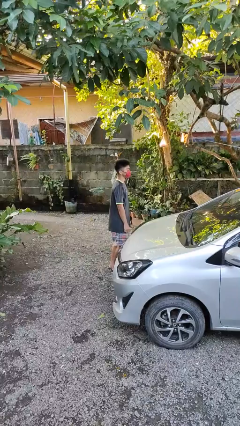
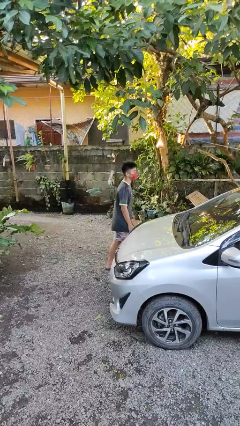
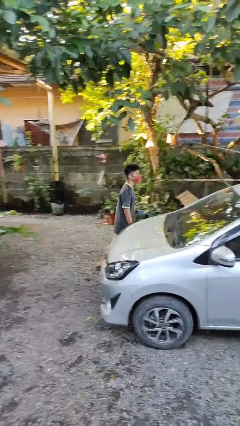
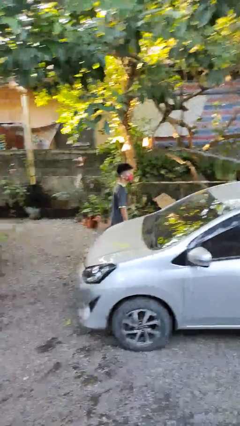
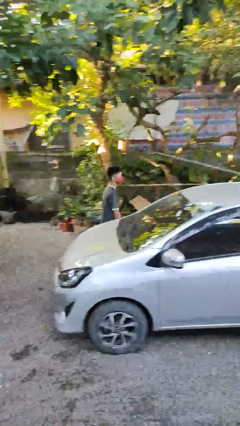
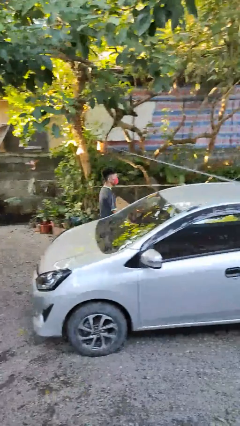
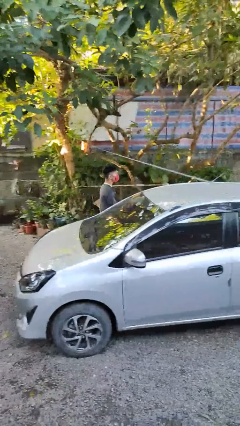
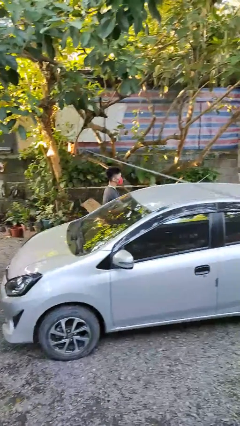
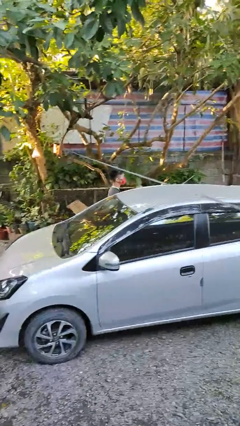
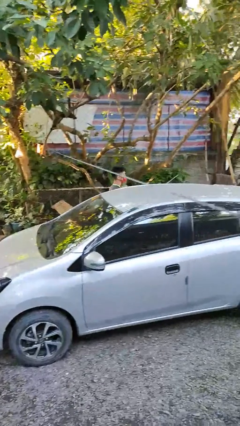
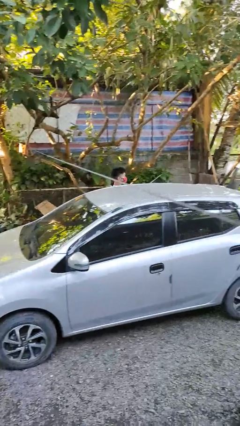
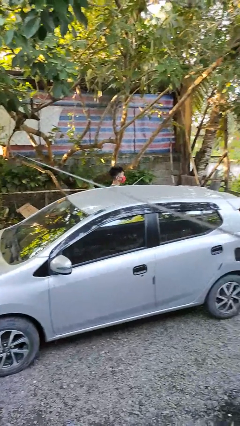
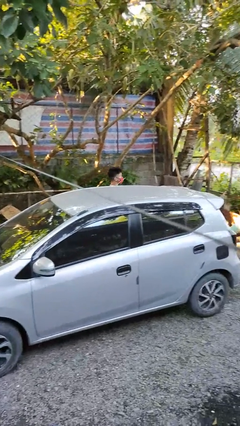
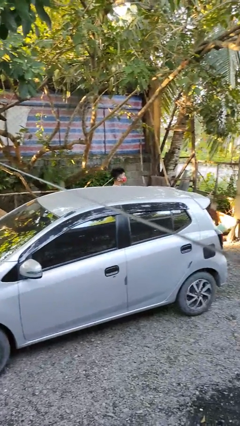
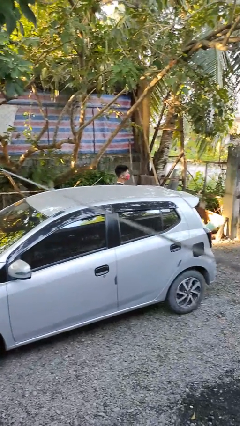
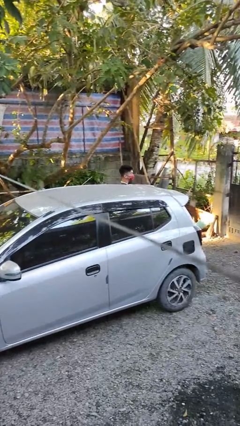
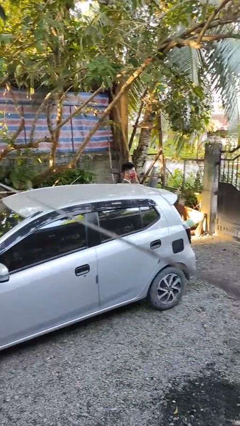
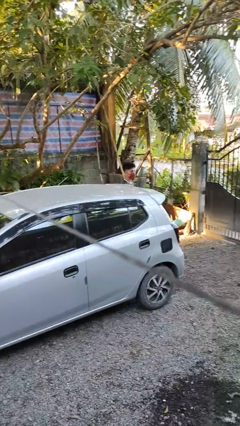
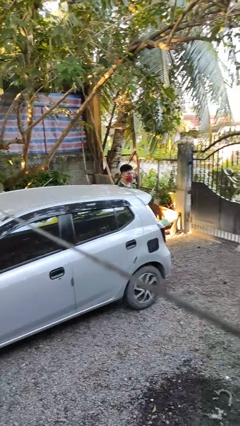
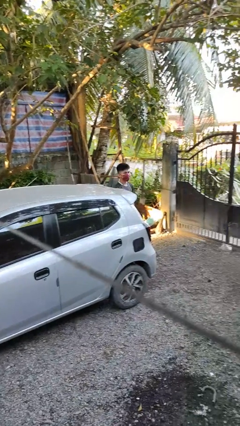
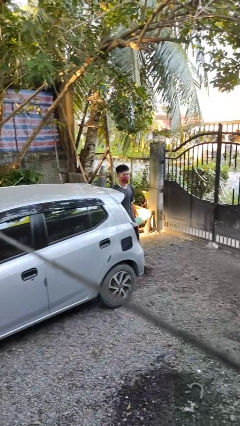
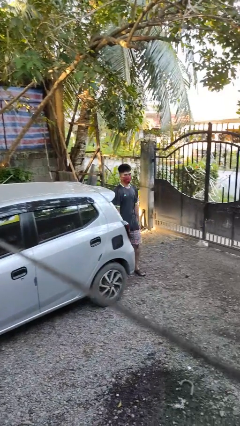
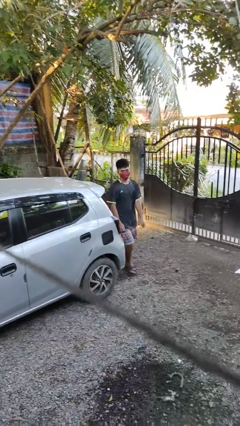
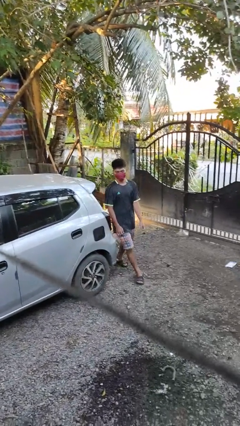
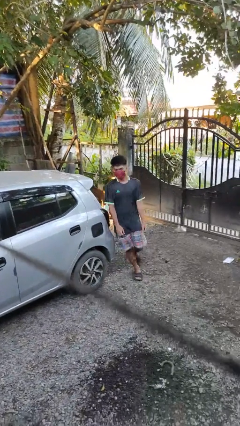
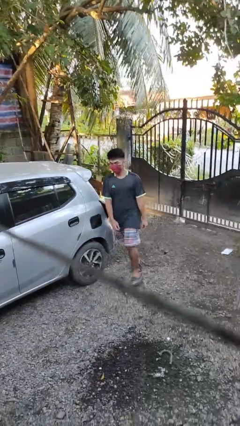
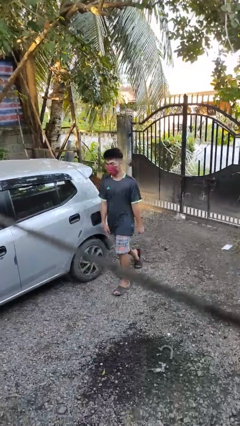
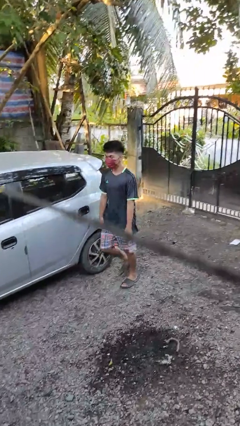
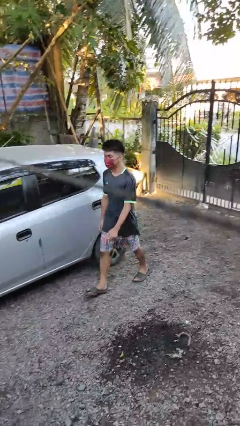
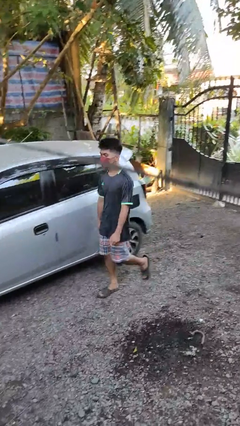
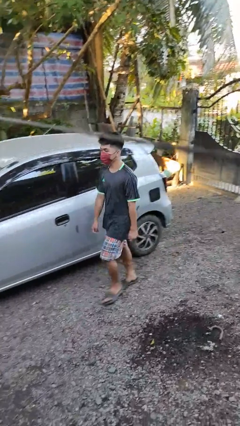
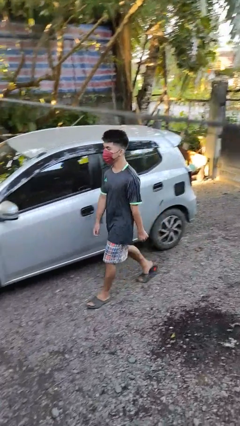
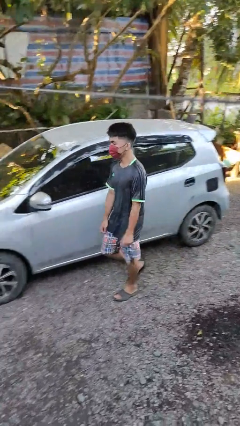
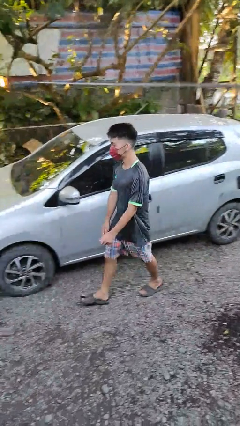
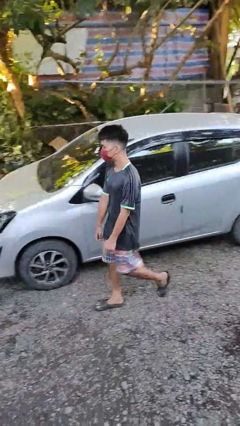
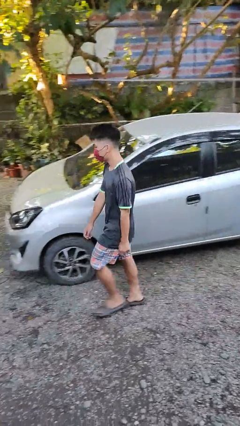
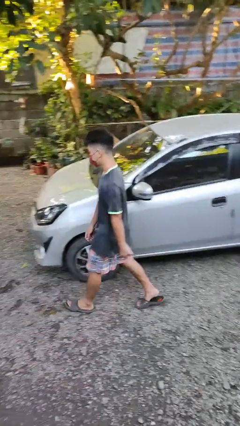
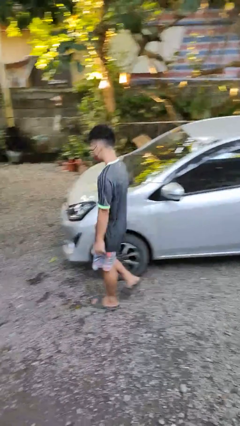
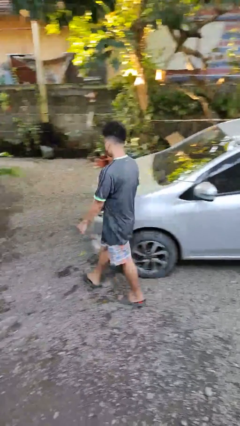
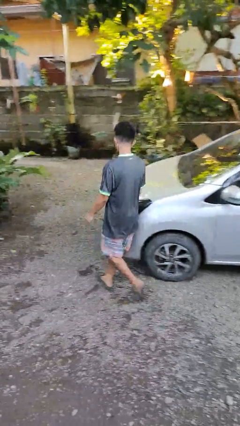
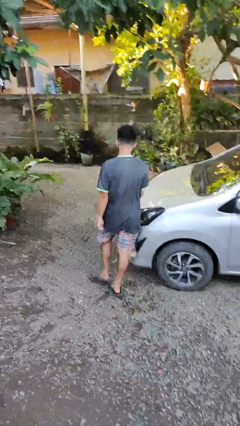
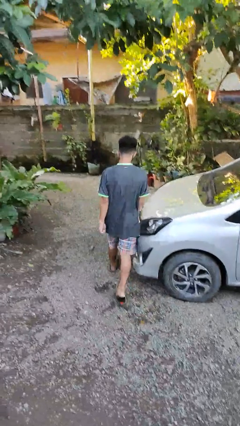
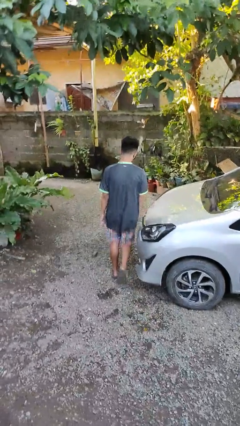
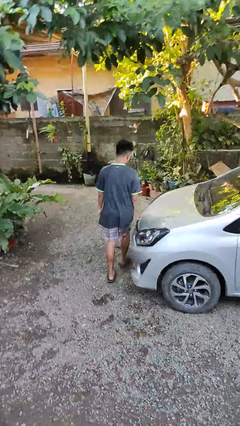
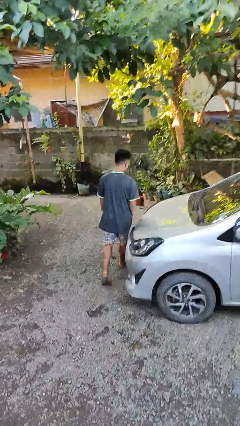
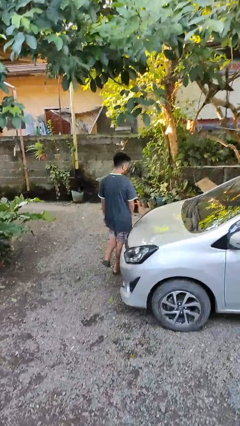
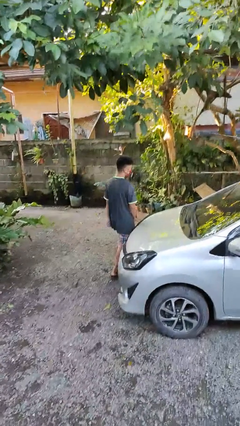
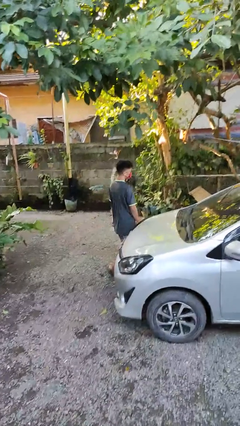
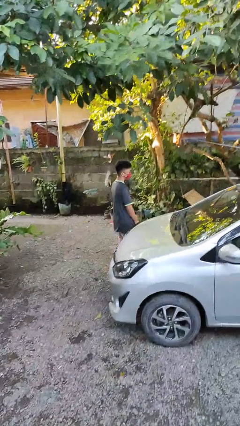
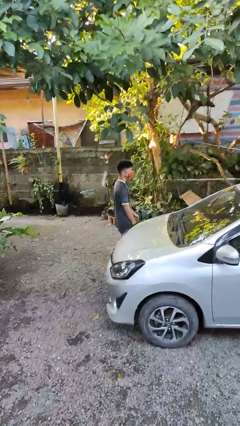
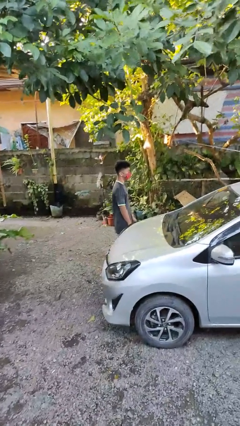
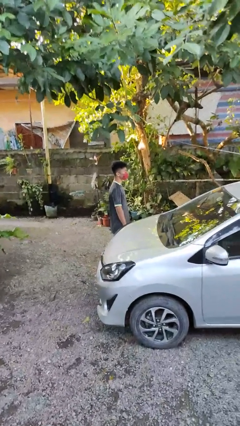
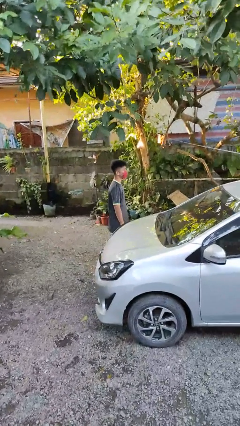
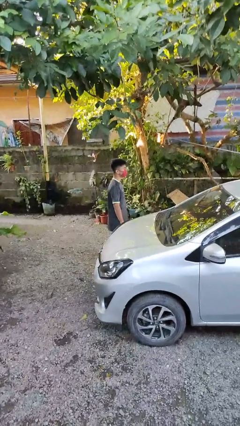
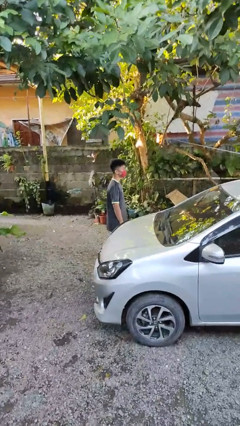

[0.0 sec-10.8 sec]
person walks around car

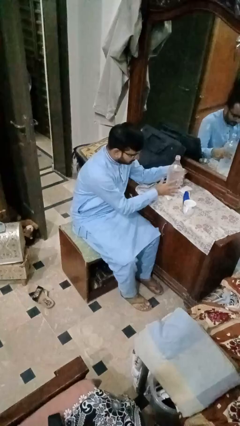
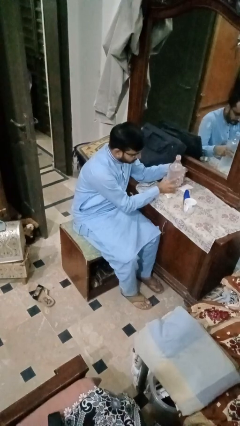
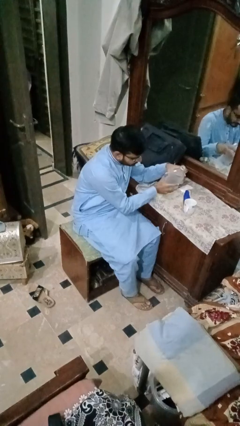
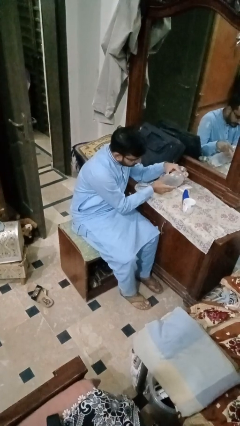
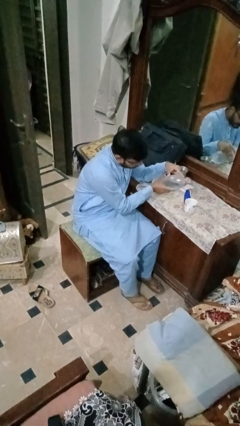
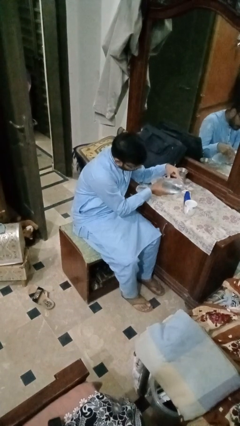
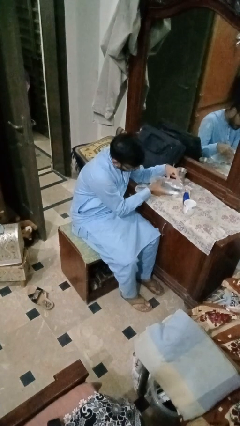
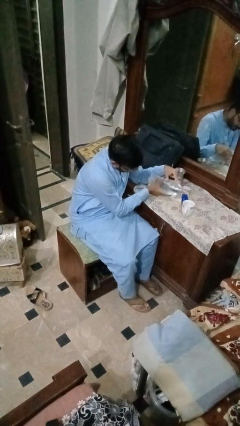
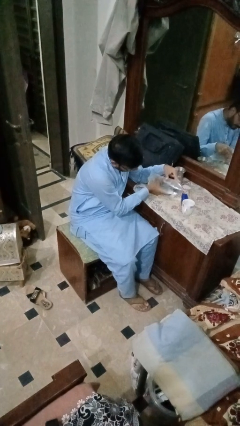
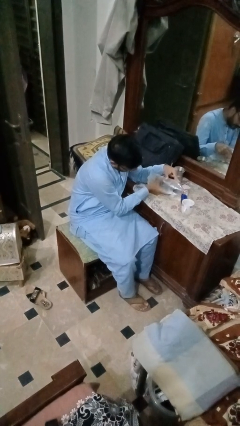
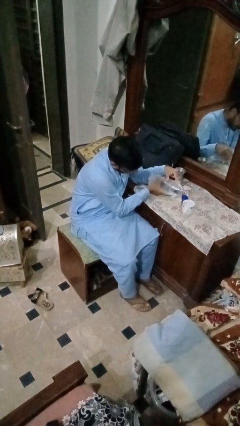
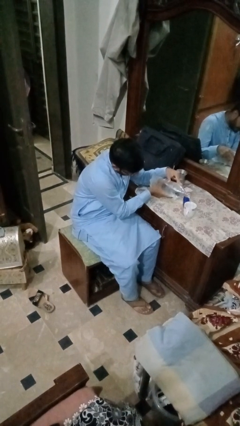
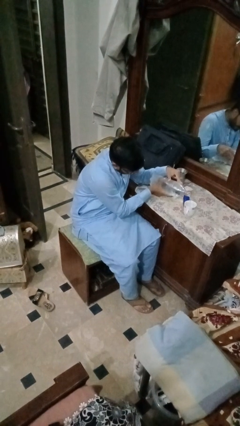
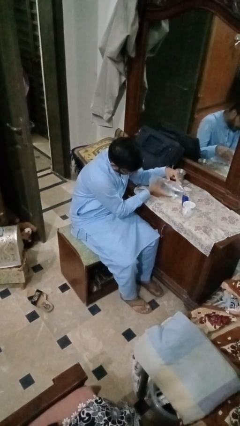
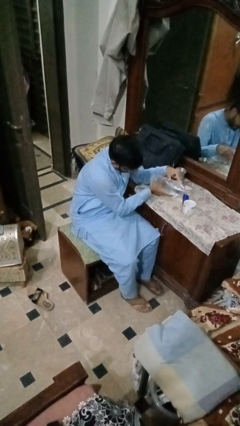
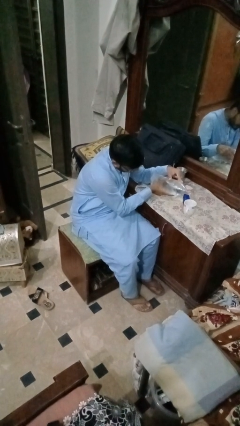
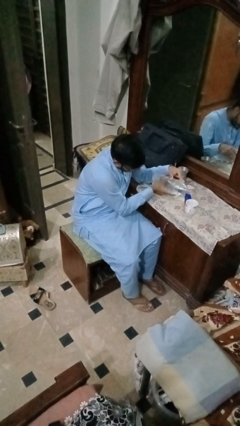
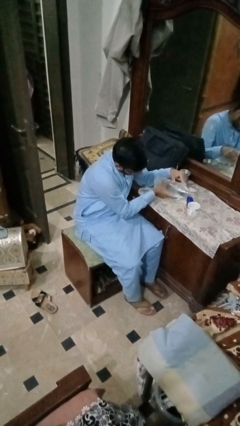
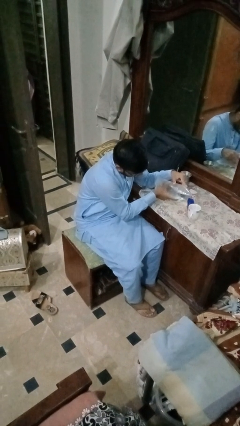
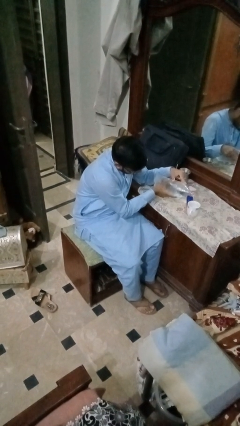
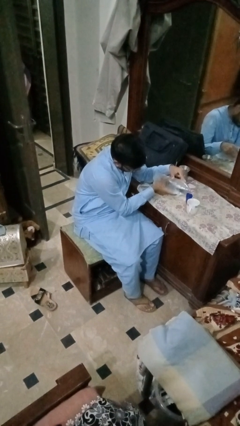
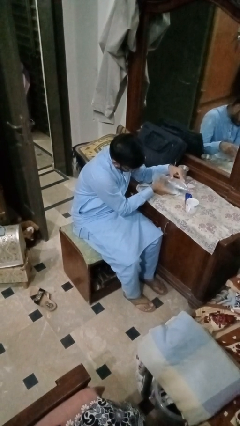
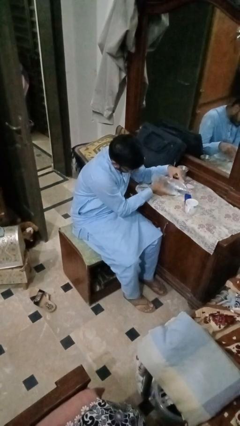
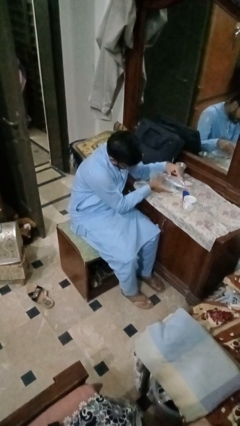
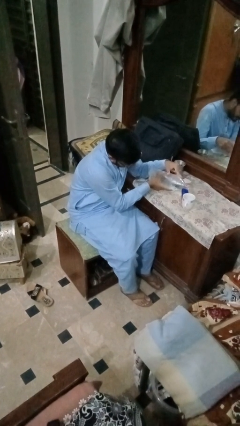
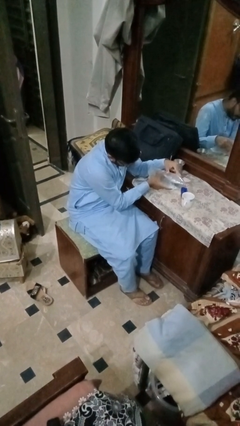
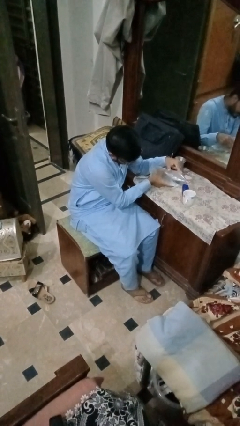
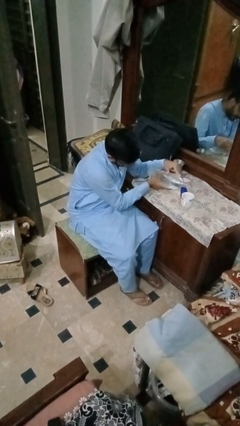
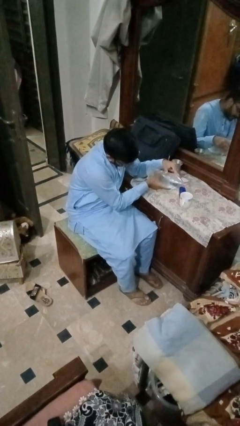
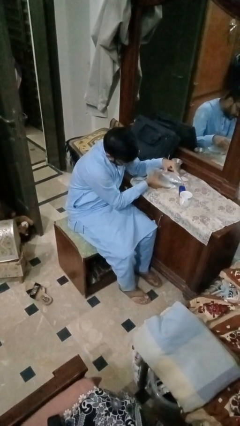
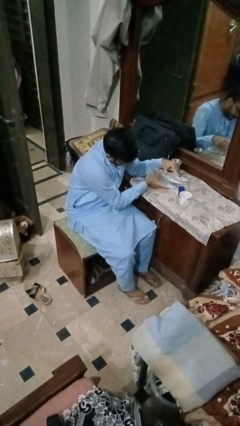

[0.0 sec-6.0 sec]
person pours liquid into cup

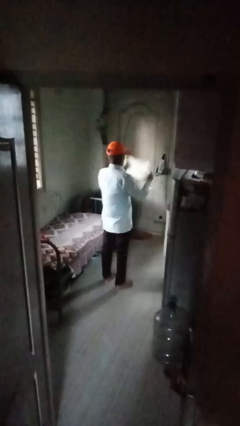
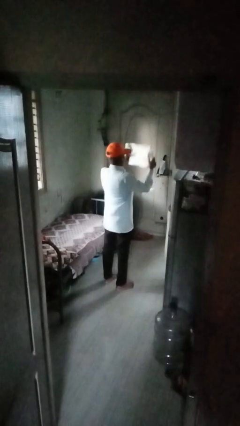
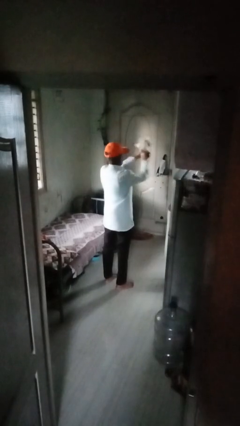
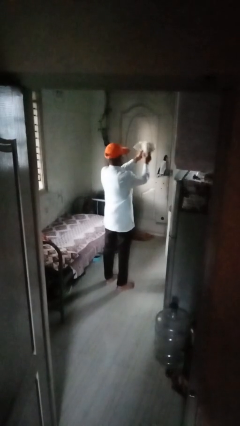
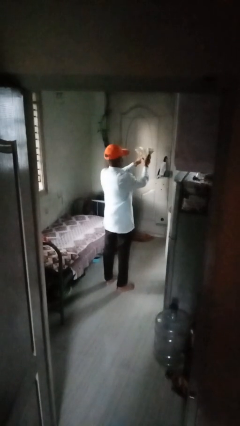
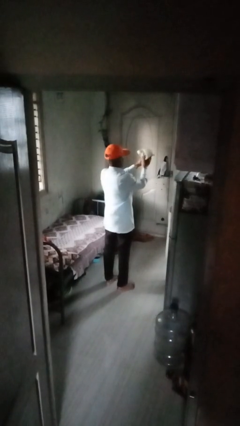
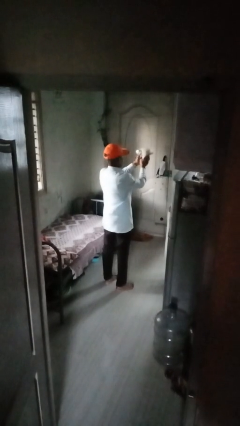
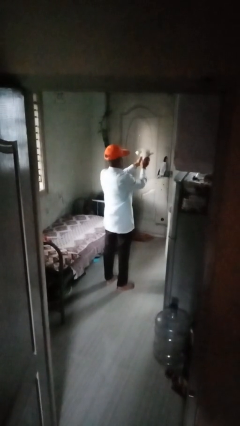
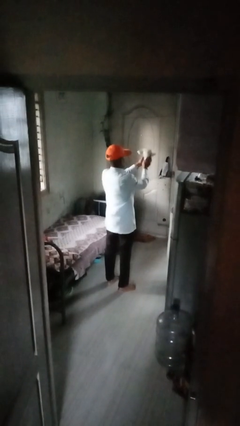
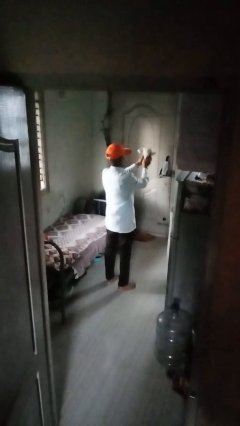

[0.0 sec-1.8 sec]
person crumples paper
